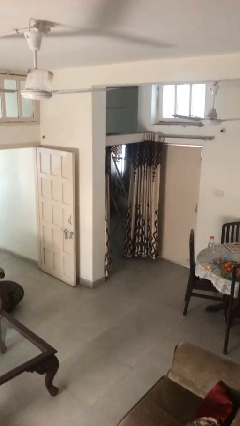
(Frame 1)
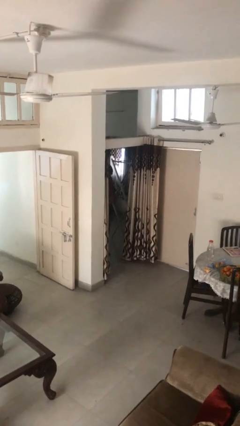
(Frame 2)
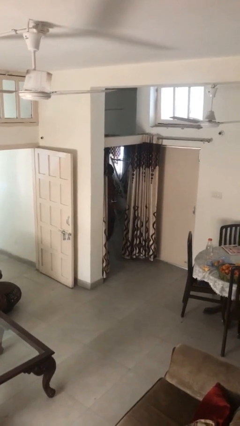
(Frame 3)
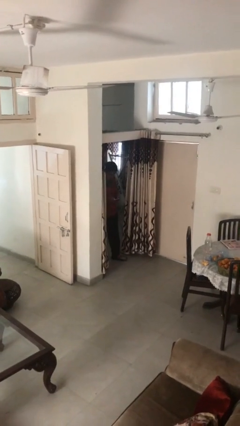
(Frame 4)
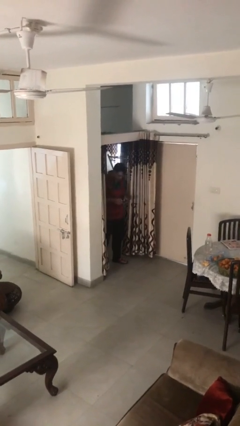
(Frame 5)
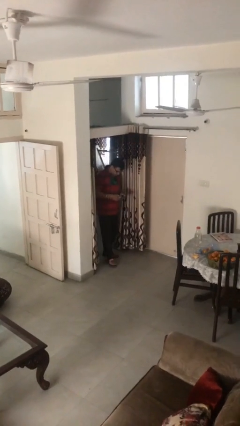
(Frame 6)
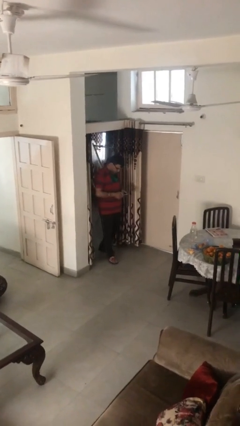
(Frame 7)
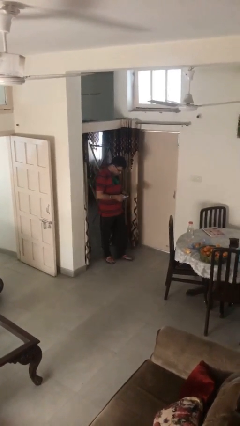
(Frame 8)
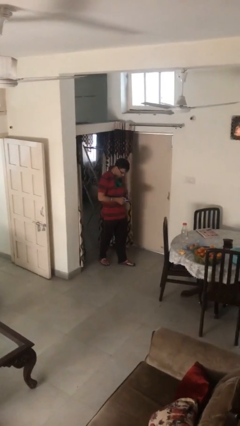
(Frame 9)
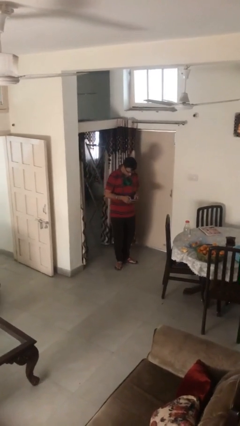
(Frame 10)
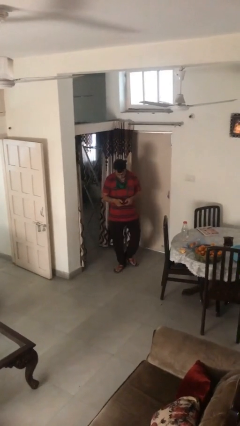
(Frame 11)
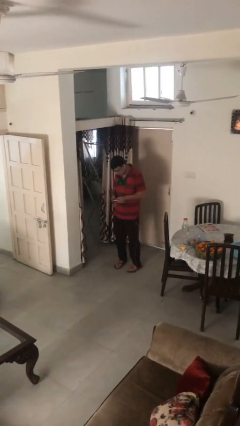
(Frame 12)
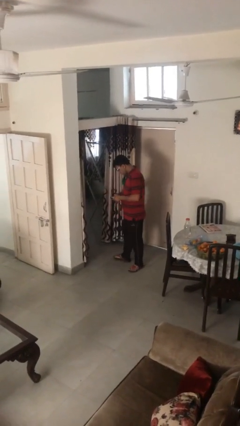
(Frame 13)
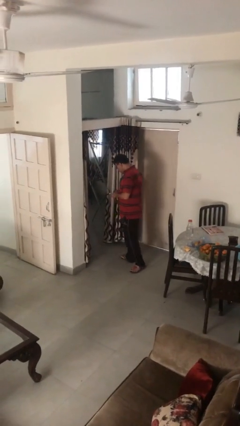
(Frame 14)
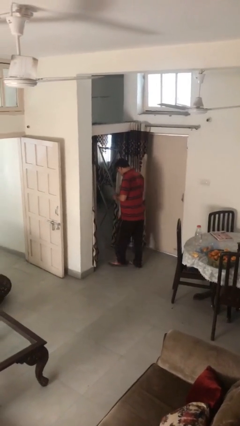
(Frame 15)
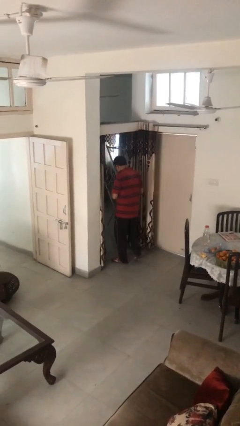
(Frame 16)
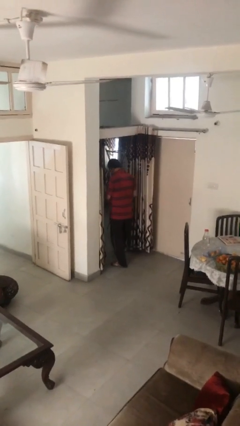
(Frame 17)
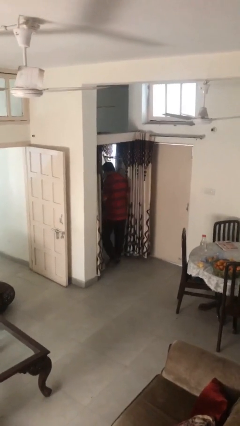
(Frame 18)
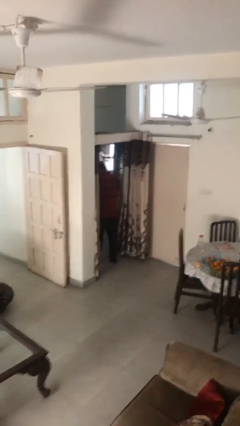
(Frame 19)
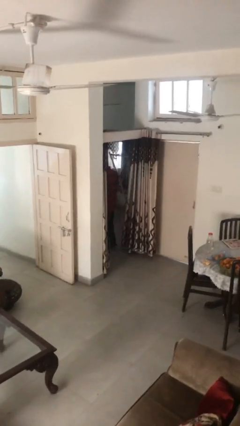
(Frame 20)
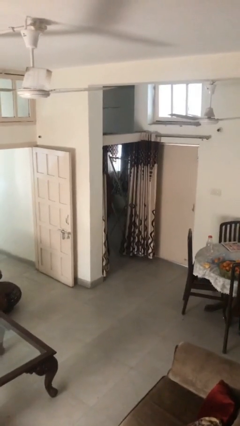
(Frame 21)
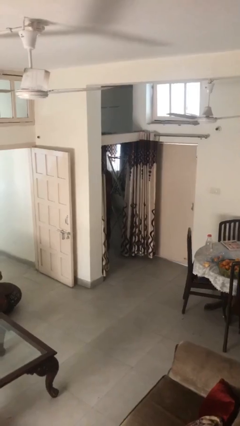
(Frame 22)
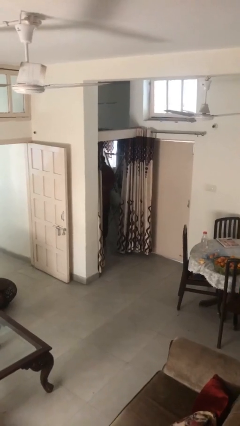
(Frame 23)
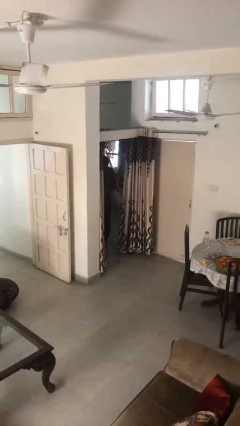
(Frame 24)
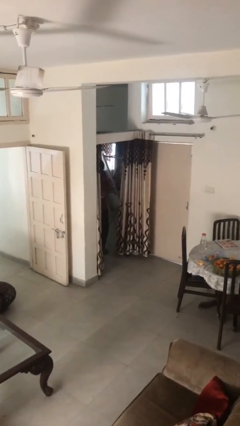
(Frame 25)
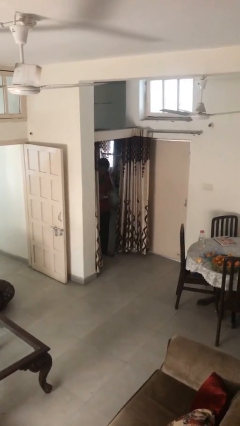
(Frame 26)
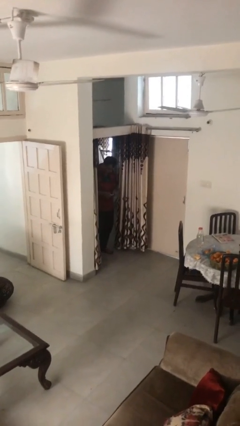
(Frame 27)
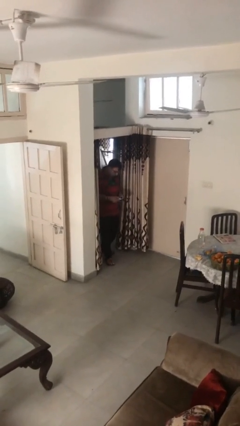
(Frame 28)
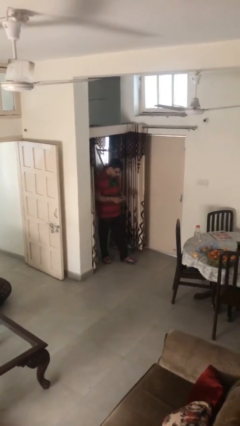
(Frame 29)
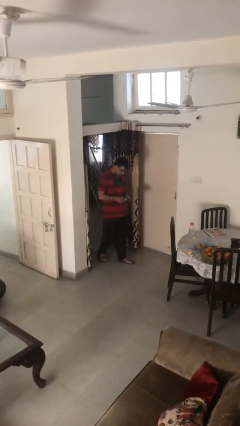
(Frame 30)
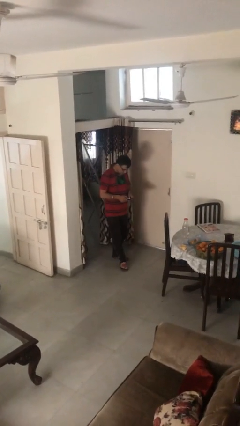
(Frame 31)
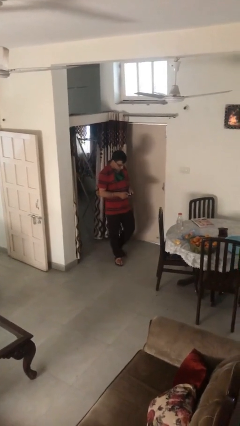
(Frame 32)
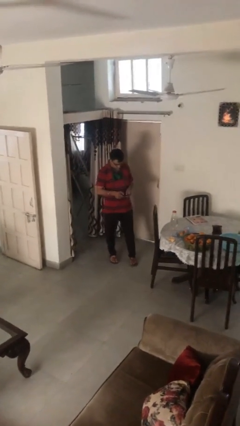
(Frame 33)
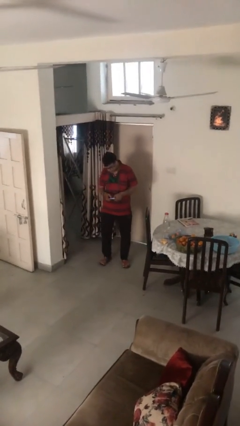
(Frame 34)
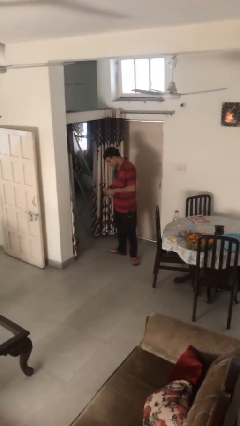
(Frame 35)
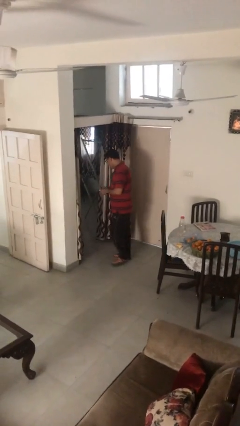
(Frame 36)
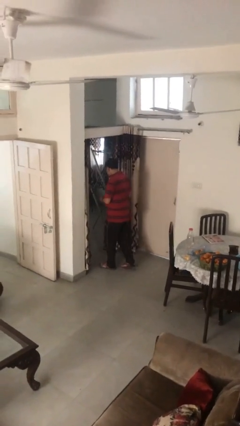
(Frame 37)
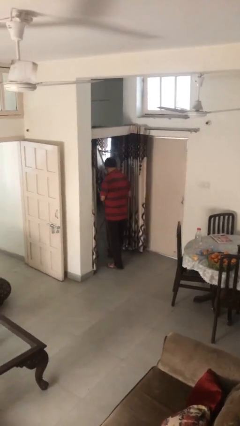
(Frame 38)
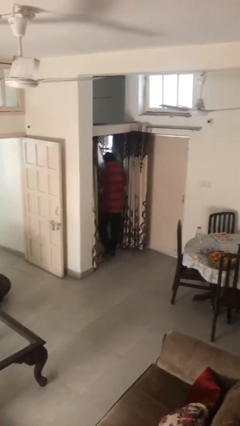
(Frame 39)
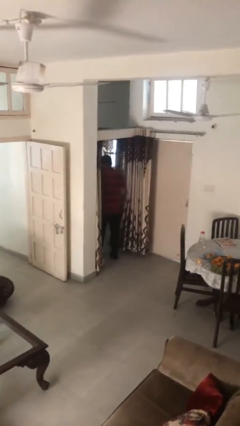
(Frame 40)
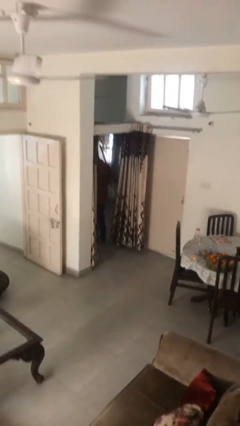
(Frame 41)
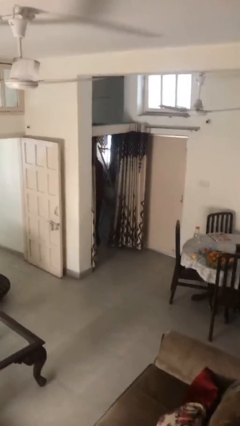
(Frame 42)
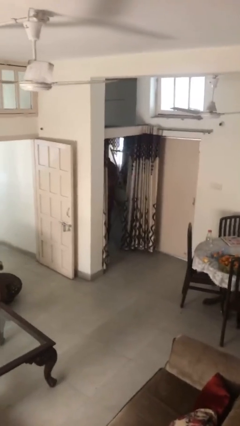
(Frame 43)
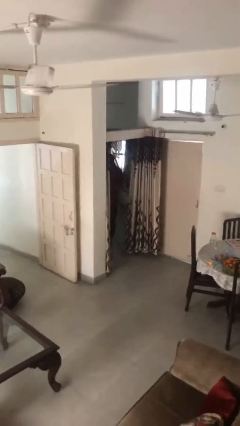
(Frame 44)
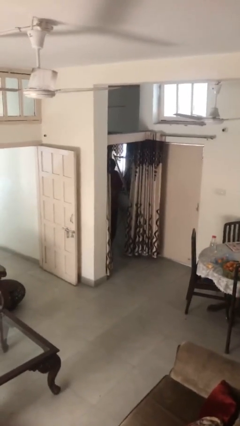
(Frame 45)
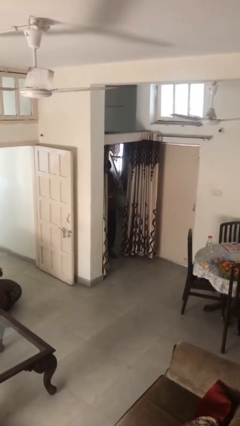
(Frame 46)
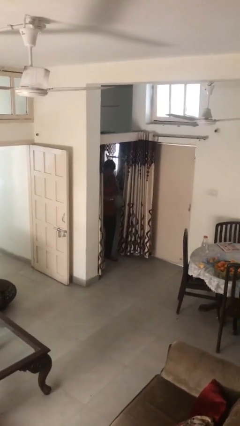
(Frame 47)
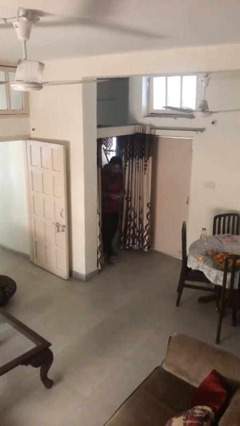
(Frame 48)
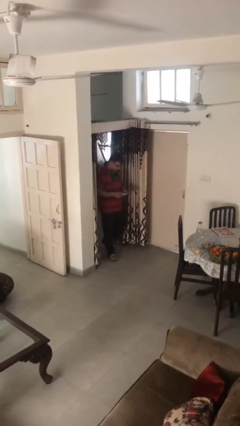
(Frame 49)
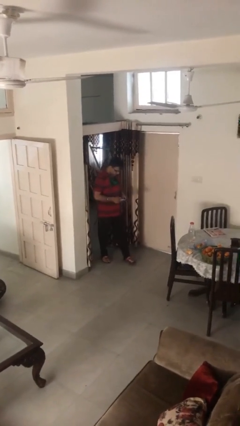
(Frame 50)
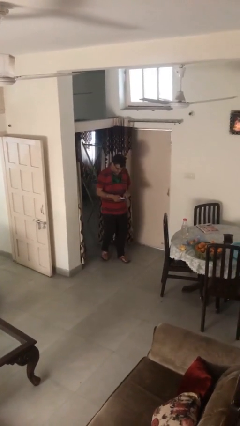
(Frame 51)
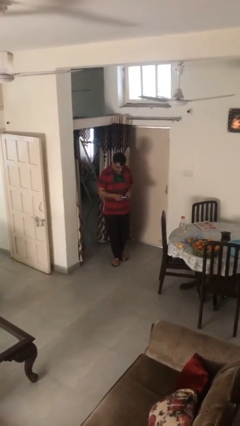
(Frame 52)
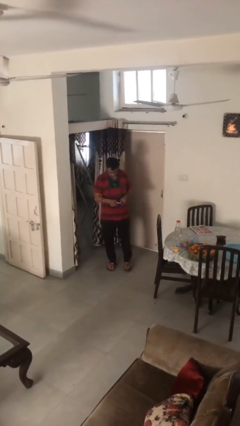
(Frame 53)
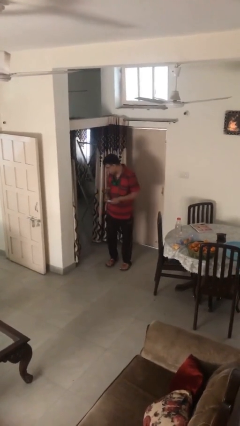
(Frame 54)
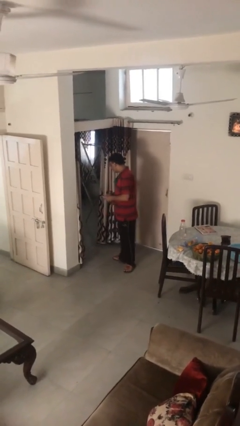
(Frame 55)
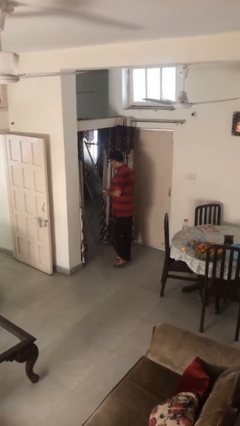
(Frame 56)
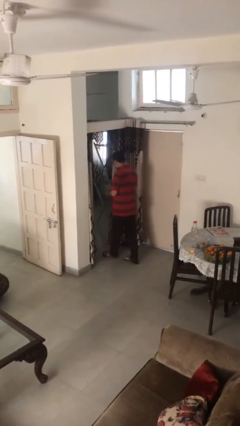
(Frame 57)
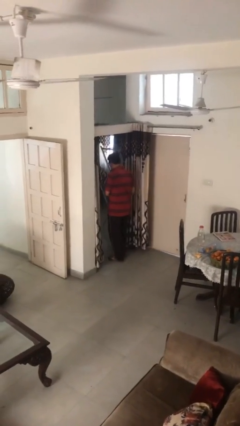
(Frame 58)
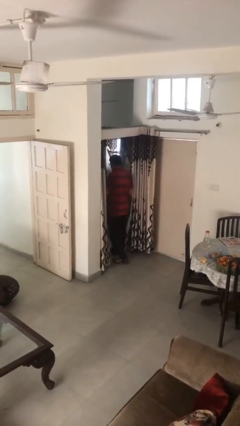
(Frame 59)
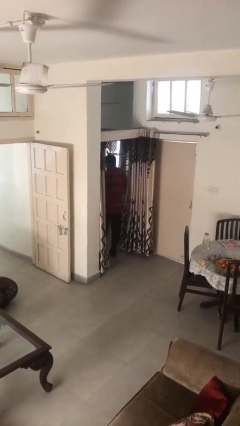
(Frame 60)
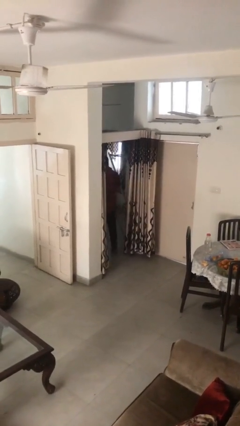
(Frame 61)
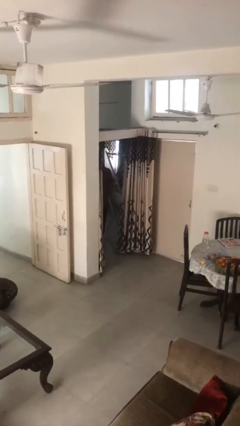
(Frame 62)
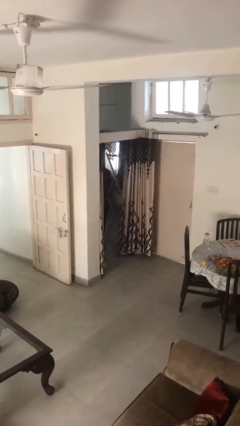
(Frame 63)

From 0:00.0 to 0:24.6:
person texts on phone

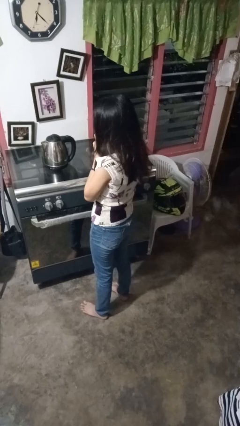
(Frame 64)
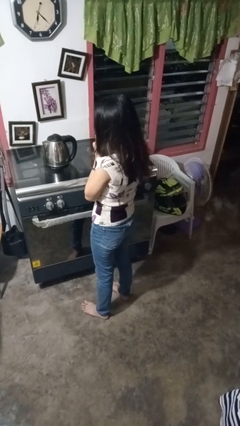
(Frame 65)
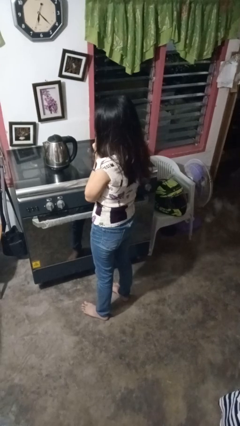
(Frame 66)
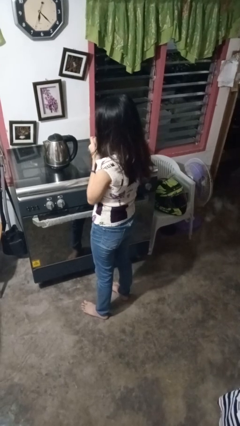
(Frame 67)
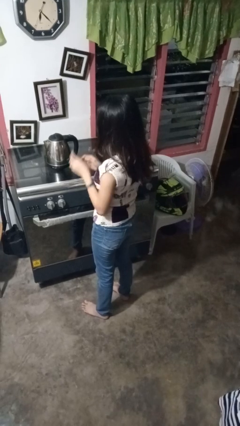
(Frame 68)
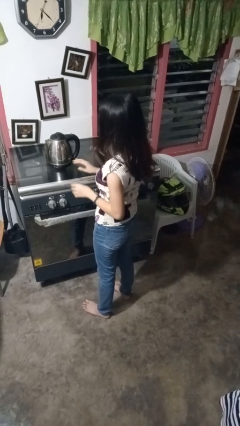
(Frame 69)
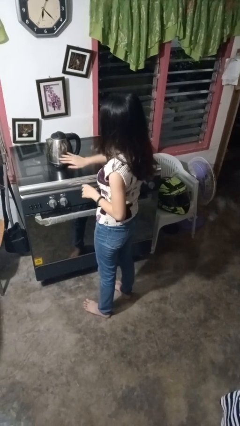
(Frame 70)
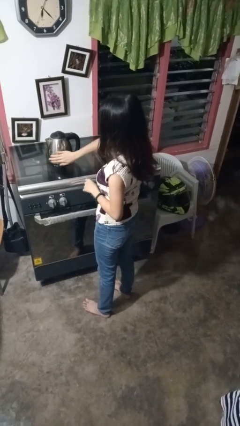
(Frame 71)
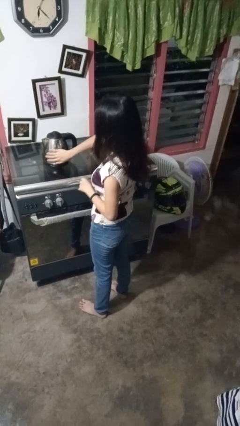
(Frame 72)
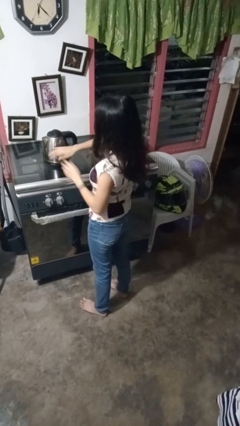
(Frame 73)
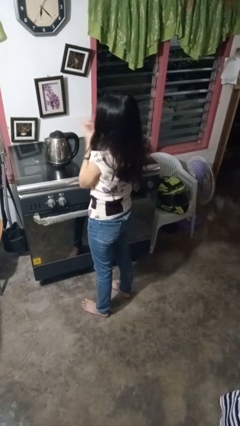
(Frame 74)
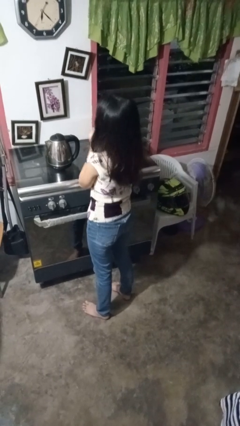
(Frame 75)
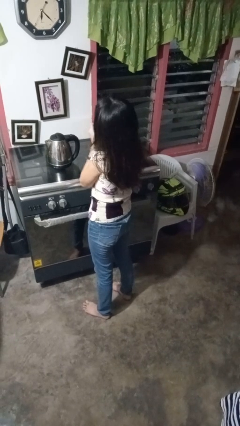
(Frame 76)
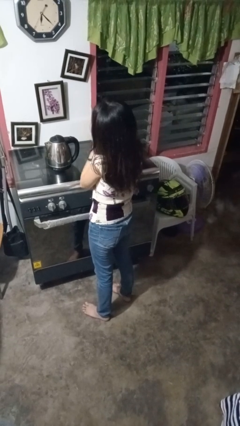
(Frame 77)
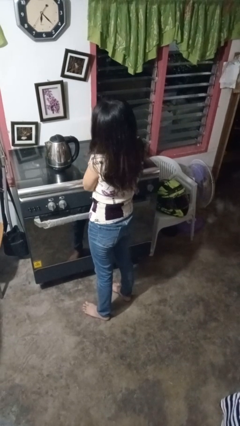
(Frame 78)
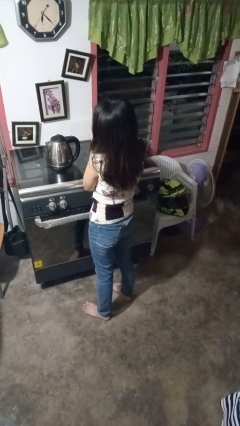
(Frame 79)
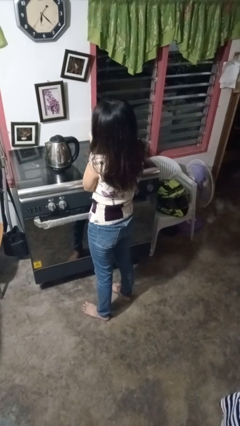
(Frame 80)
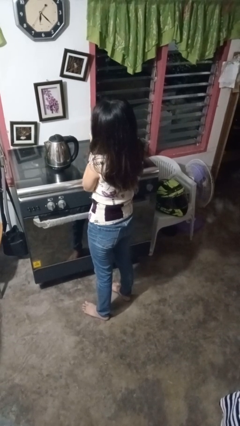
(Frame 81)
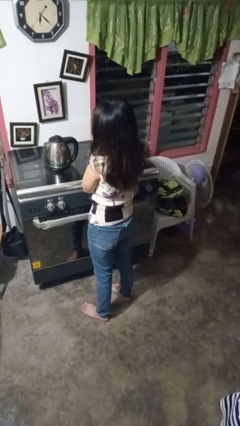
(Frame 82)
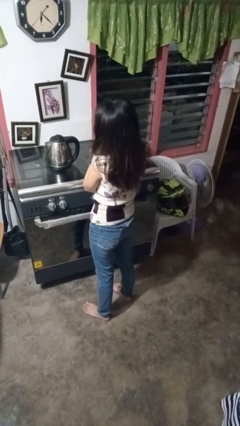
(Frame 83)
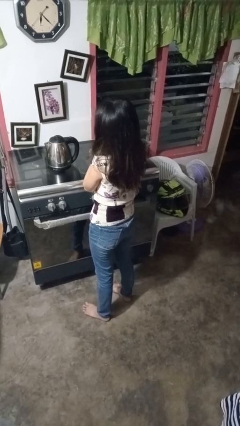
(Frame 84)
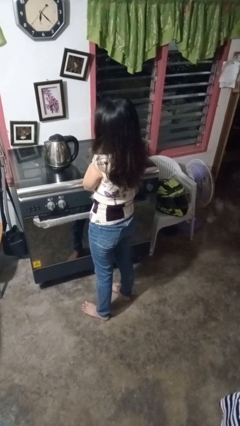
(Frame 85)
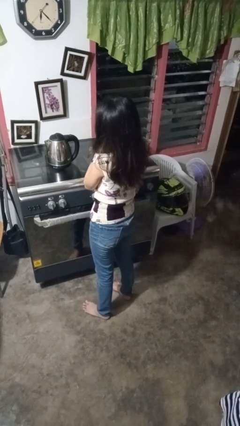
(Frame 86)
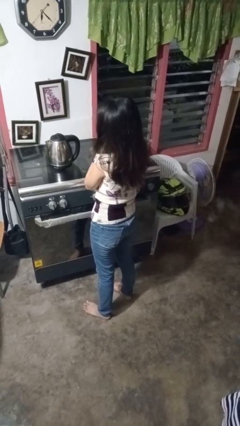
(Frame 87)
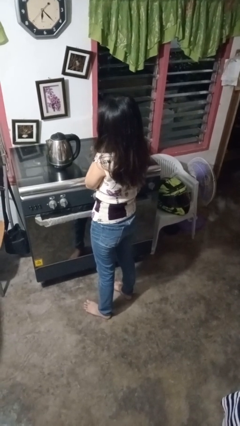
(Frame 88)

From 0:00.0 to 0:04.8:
person puts on hoodie

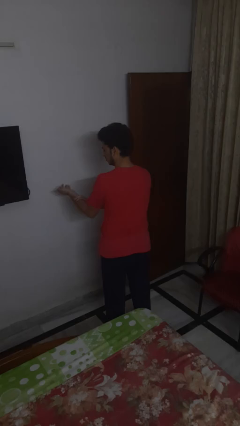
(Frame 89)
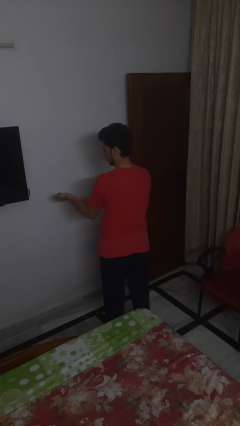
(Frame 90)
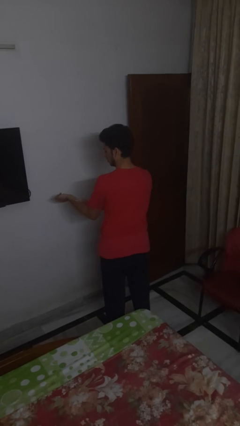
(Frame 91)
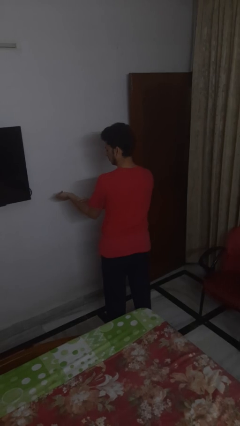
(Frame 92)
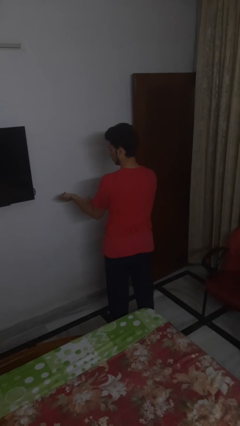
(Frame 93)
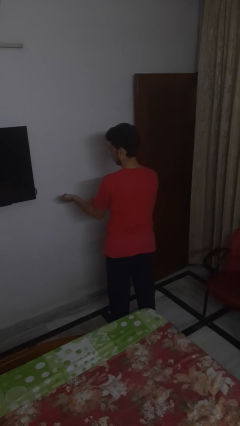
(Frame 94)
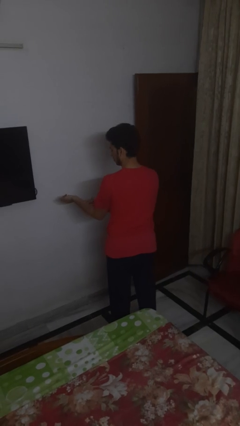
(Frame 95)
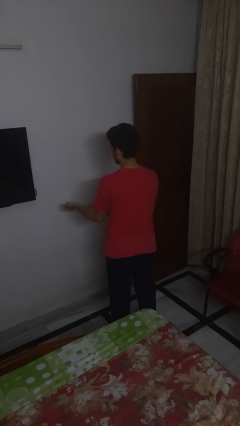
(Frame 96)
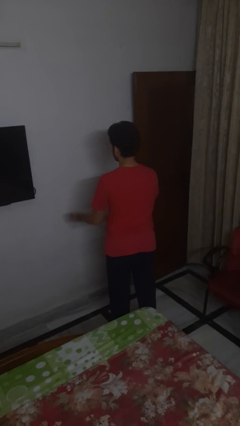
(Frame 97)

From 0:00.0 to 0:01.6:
person swats bug
